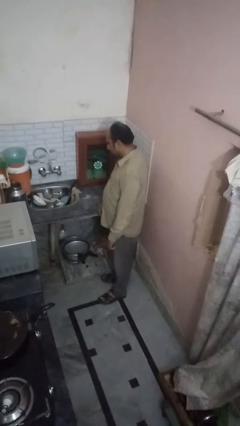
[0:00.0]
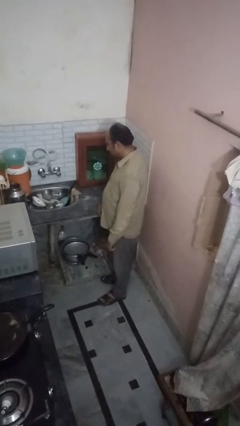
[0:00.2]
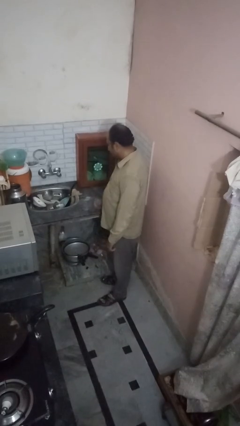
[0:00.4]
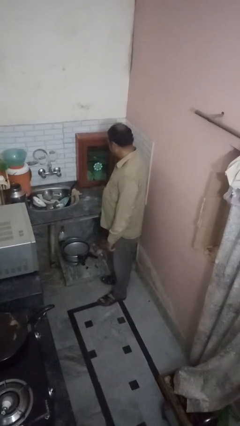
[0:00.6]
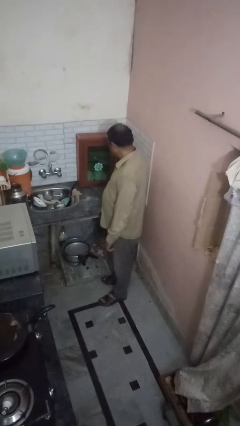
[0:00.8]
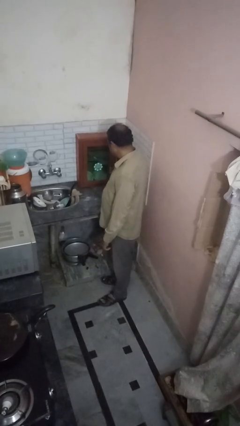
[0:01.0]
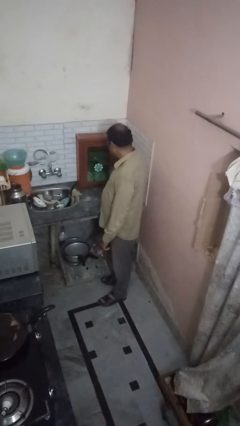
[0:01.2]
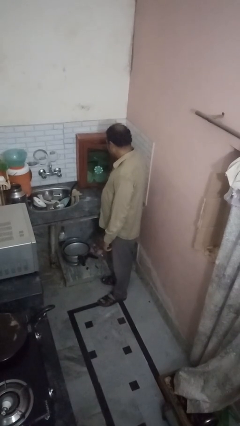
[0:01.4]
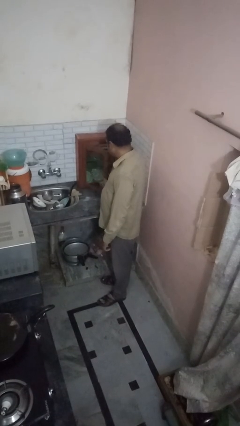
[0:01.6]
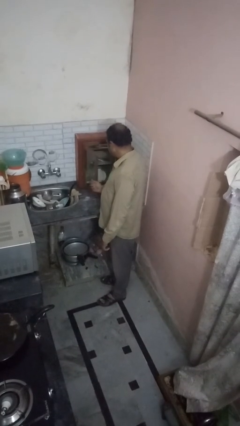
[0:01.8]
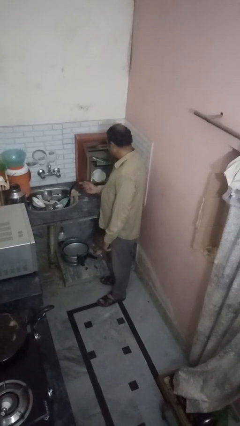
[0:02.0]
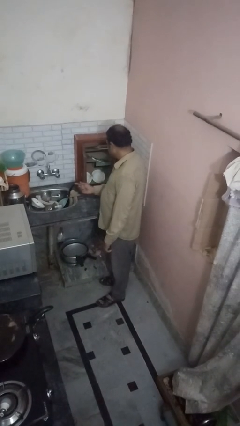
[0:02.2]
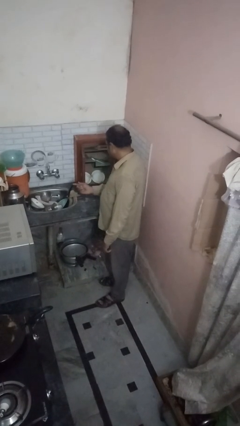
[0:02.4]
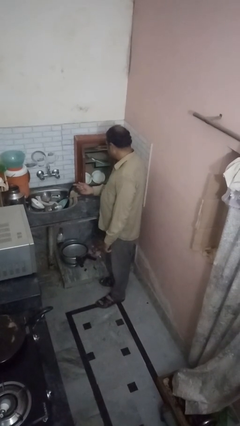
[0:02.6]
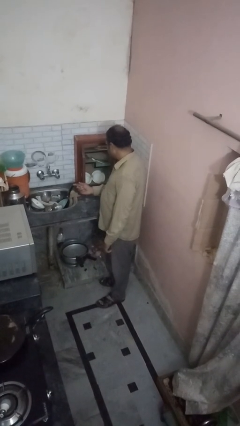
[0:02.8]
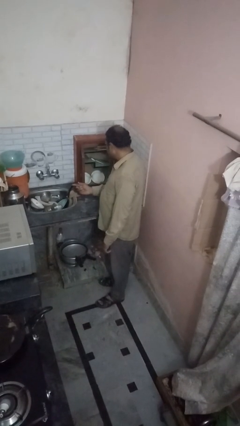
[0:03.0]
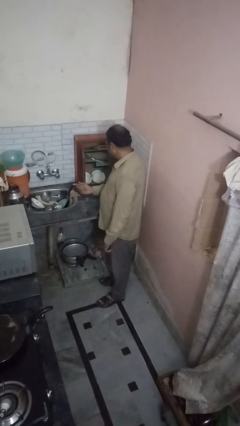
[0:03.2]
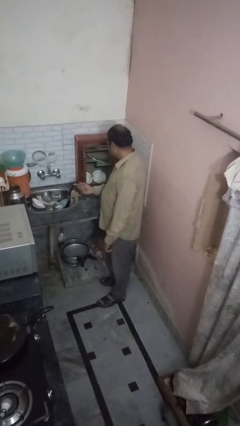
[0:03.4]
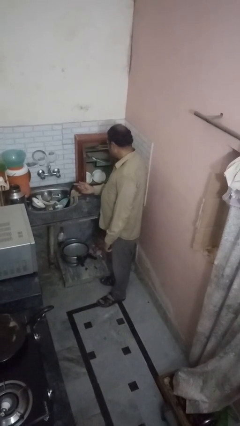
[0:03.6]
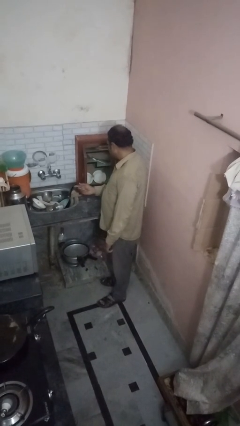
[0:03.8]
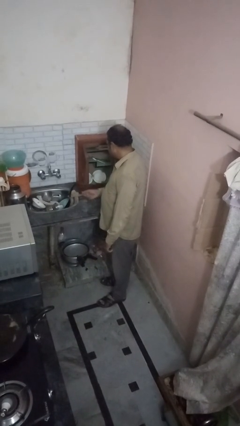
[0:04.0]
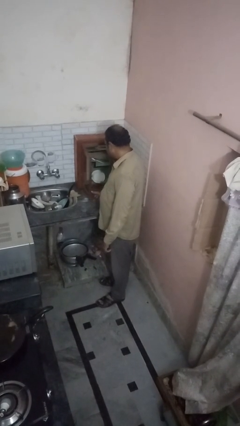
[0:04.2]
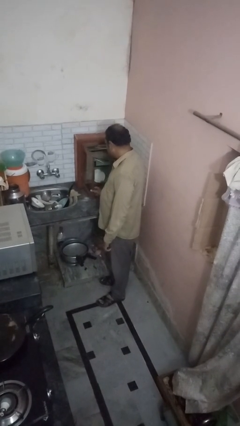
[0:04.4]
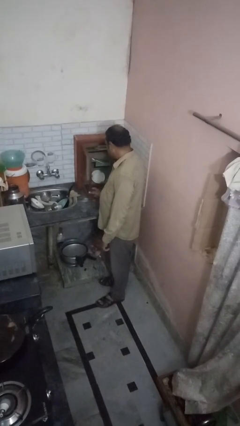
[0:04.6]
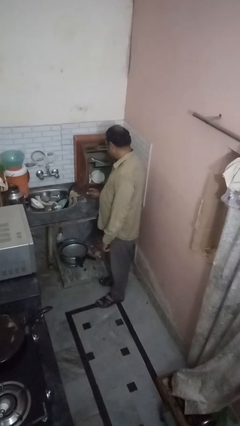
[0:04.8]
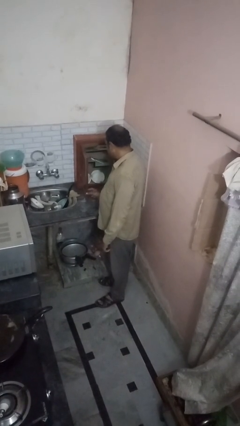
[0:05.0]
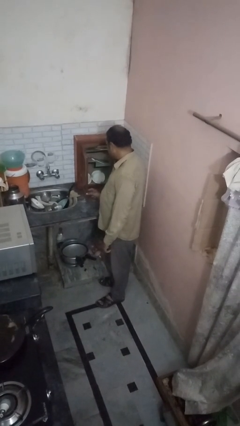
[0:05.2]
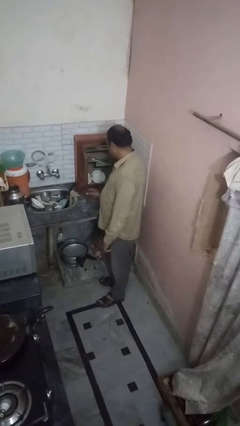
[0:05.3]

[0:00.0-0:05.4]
person opens cabinet

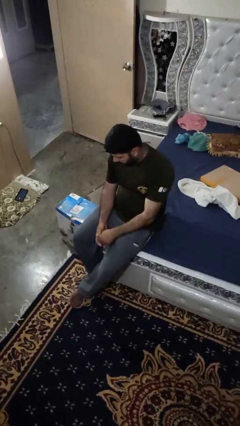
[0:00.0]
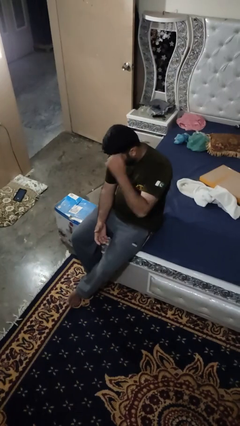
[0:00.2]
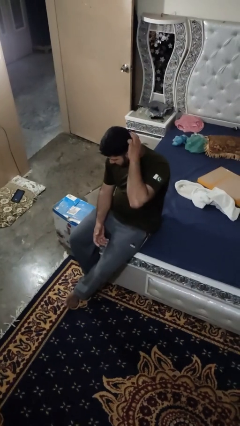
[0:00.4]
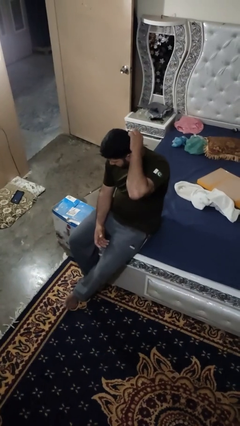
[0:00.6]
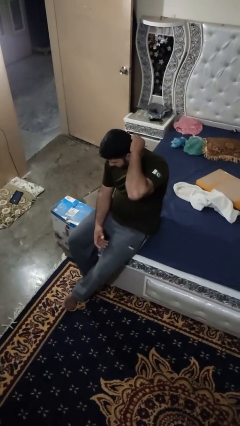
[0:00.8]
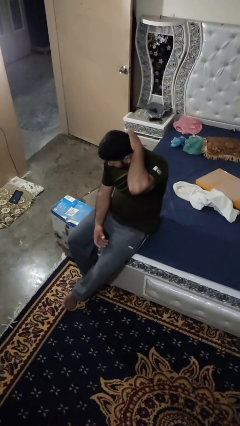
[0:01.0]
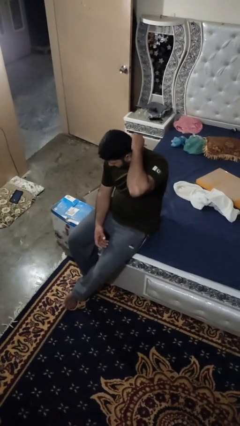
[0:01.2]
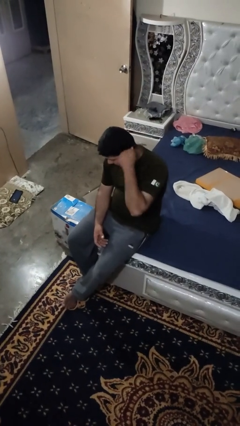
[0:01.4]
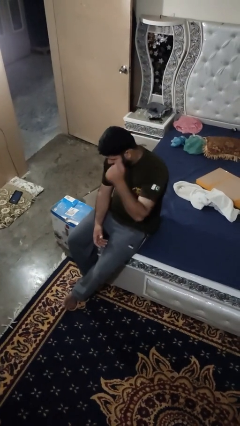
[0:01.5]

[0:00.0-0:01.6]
person strokes hair

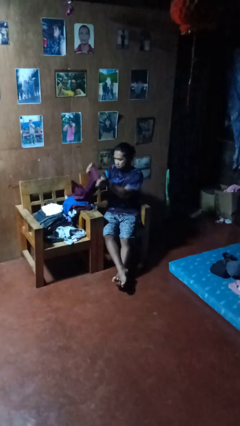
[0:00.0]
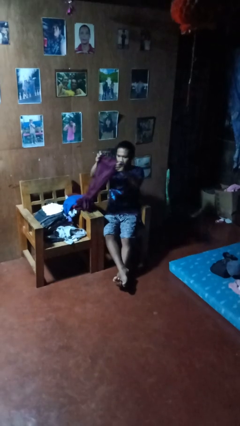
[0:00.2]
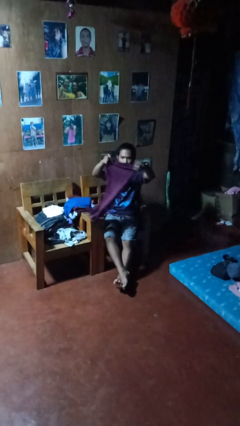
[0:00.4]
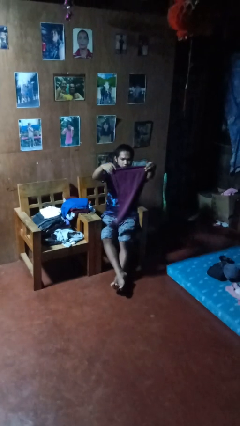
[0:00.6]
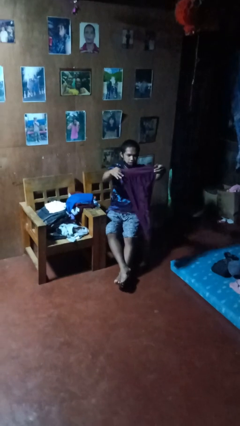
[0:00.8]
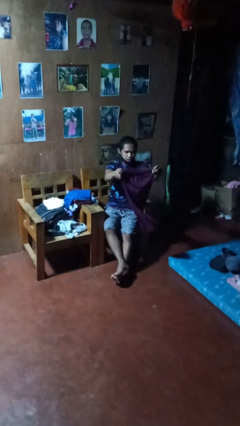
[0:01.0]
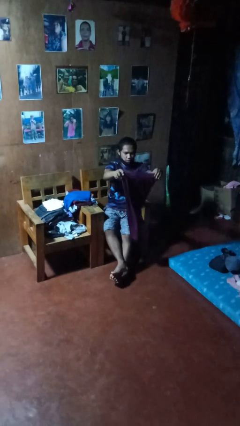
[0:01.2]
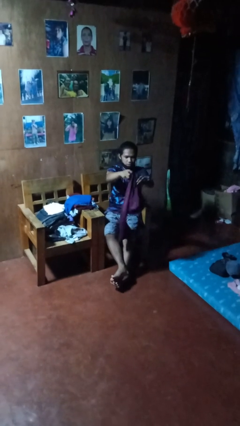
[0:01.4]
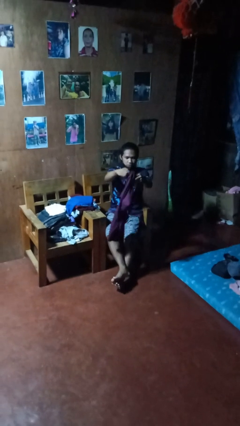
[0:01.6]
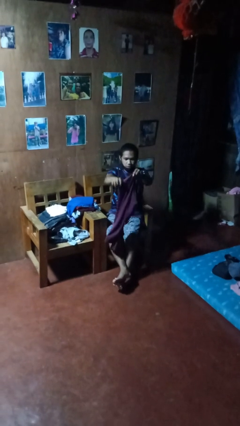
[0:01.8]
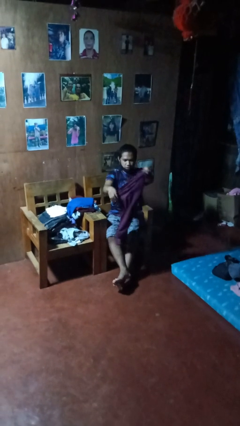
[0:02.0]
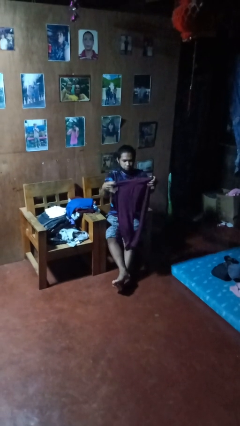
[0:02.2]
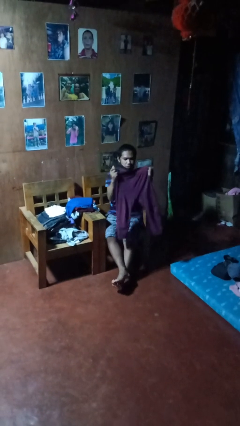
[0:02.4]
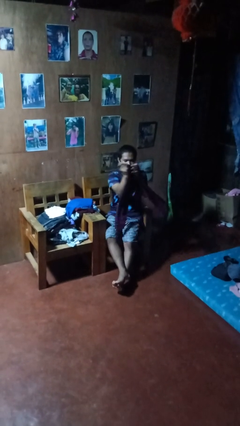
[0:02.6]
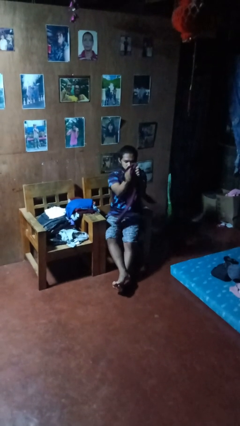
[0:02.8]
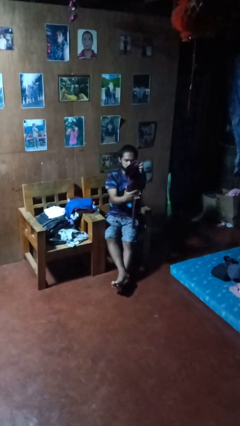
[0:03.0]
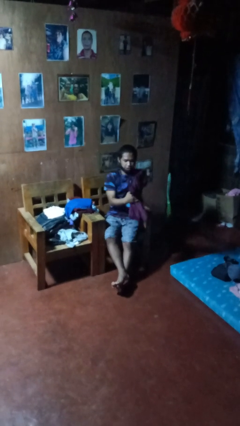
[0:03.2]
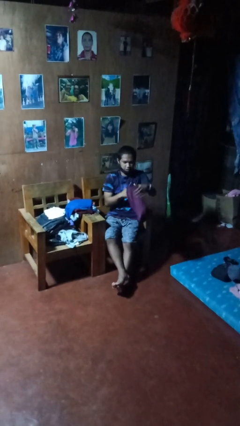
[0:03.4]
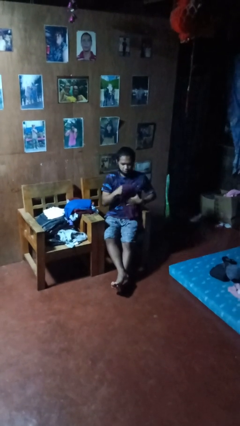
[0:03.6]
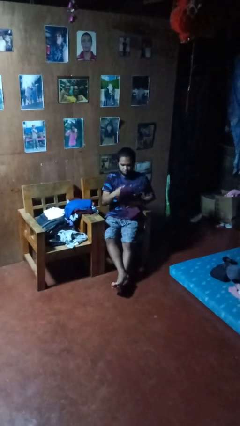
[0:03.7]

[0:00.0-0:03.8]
person folds pants

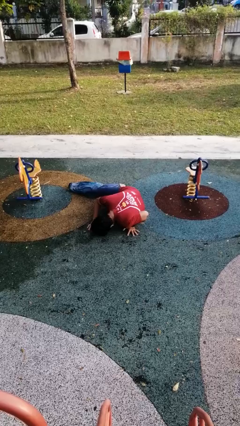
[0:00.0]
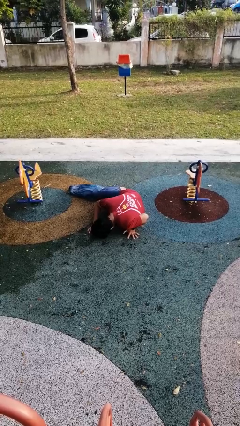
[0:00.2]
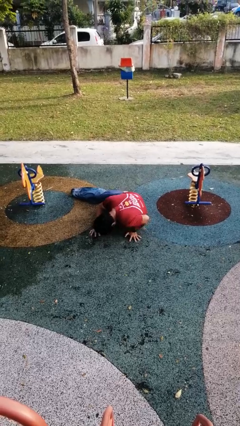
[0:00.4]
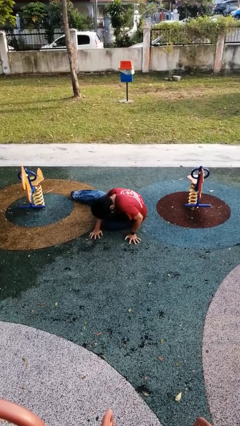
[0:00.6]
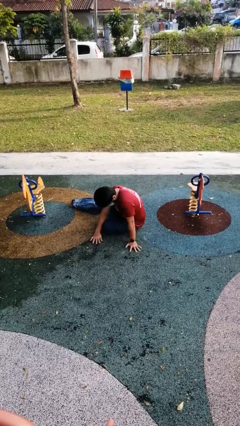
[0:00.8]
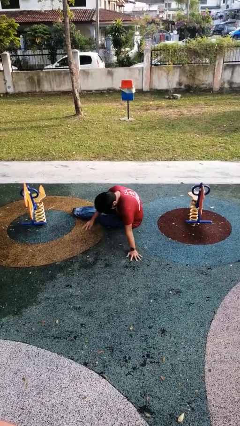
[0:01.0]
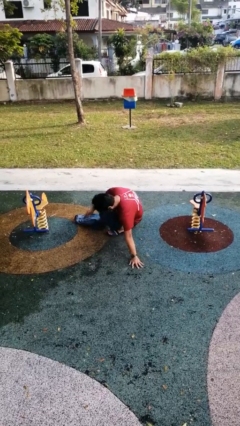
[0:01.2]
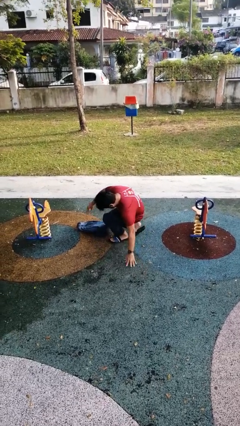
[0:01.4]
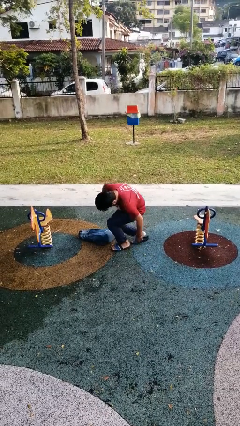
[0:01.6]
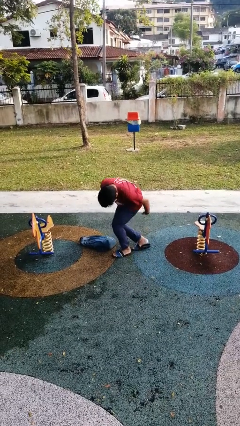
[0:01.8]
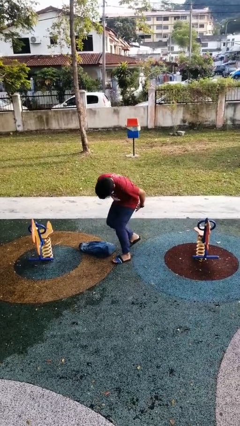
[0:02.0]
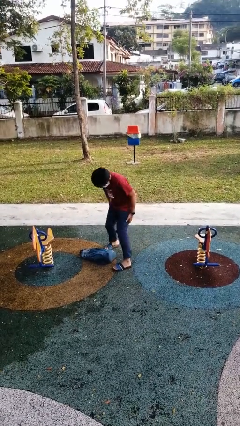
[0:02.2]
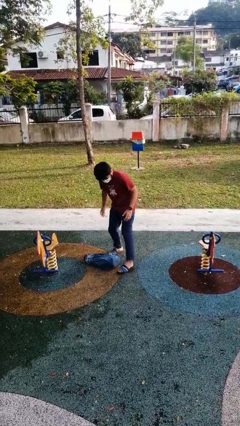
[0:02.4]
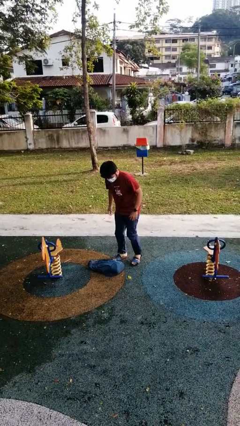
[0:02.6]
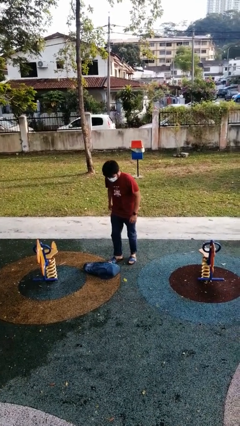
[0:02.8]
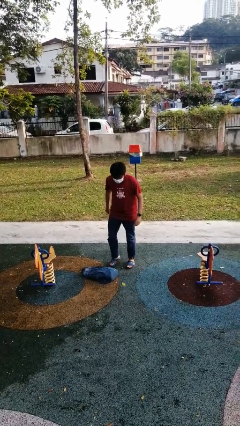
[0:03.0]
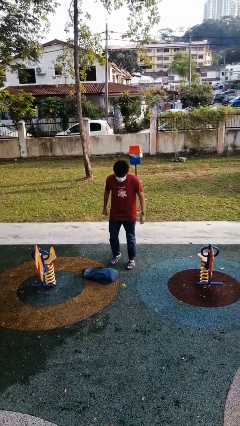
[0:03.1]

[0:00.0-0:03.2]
person stands up from floor

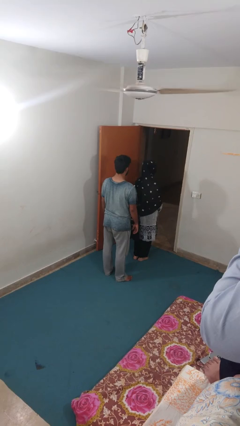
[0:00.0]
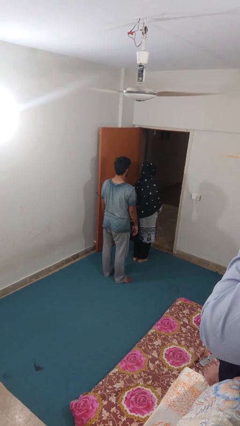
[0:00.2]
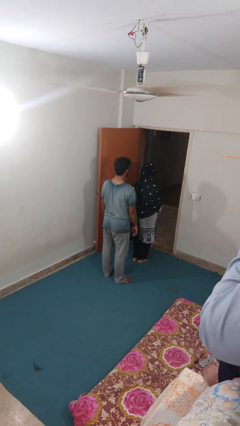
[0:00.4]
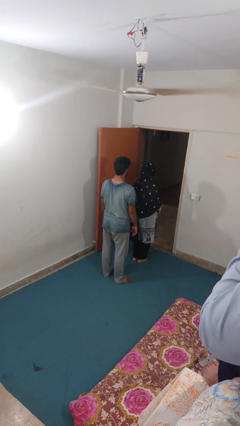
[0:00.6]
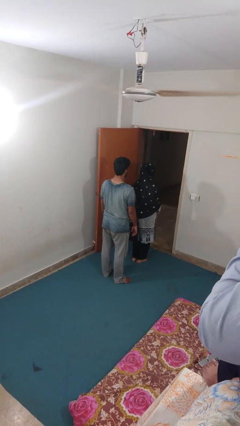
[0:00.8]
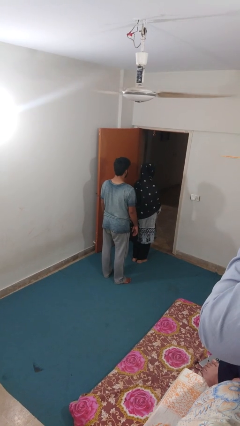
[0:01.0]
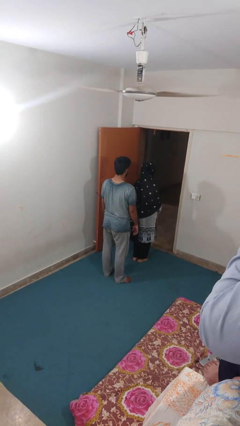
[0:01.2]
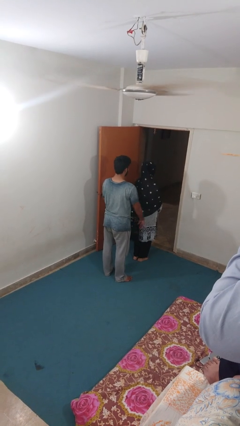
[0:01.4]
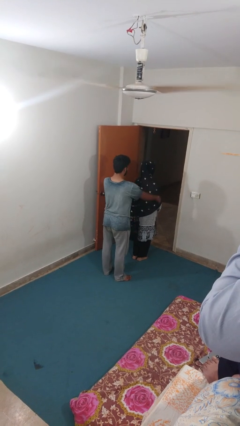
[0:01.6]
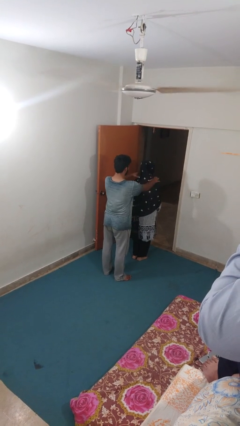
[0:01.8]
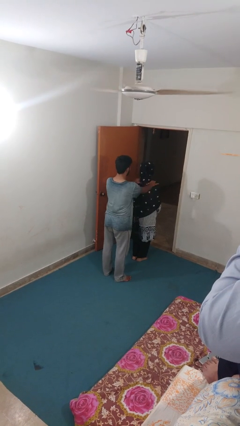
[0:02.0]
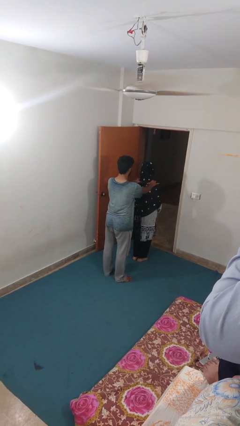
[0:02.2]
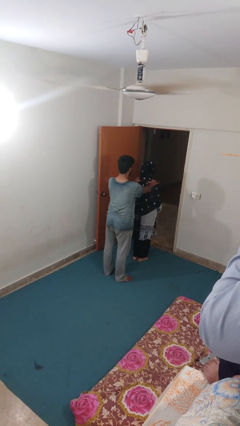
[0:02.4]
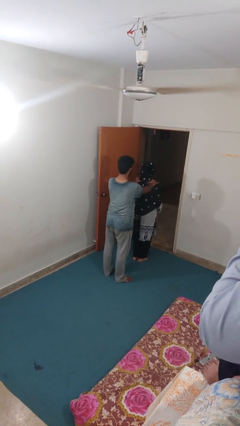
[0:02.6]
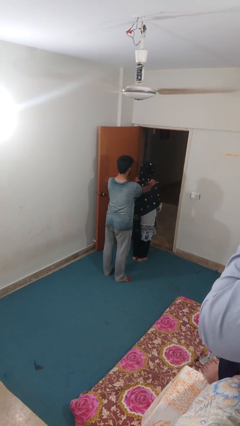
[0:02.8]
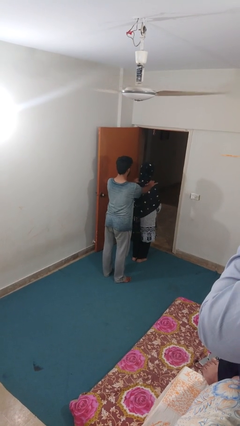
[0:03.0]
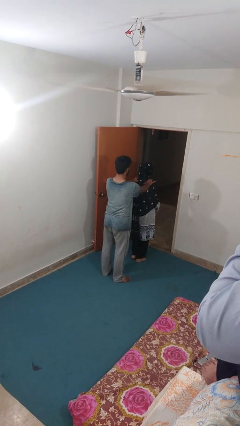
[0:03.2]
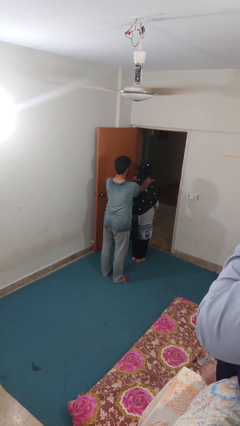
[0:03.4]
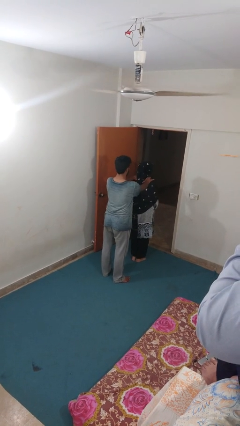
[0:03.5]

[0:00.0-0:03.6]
person grabs person by shoulder

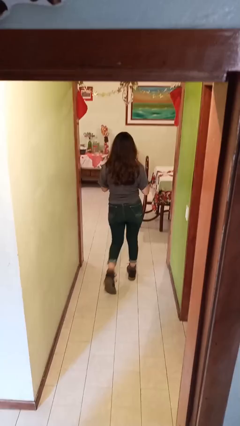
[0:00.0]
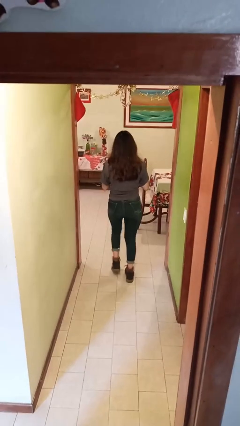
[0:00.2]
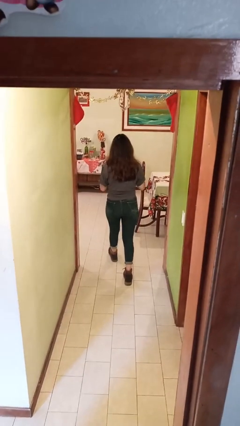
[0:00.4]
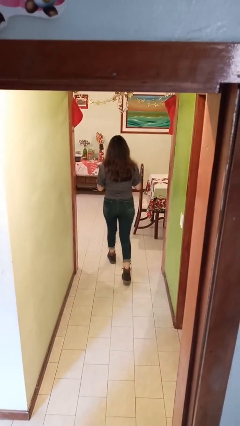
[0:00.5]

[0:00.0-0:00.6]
person exits scene through structure
